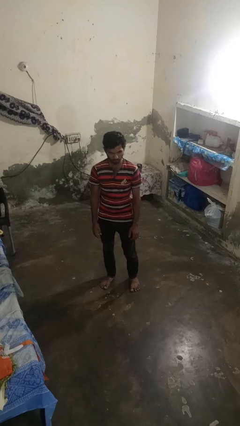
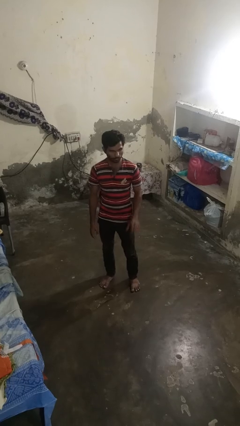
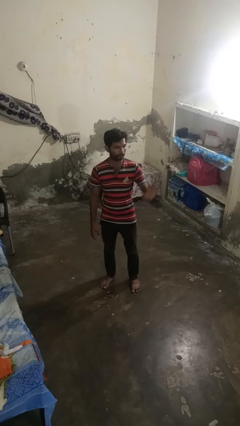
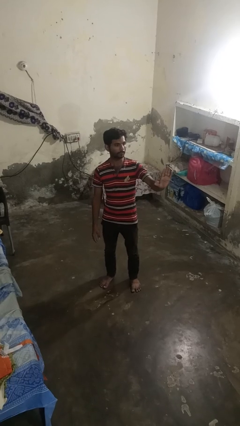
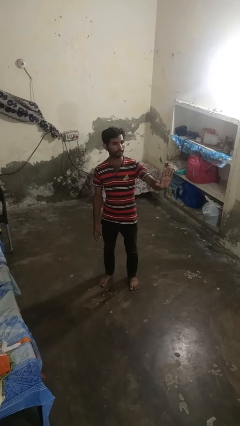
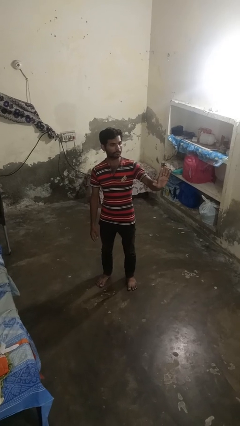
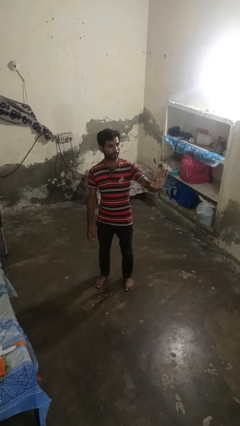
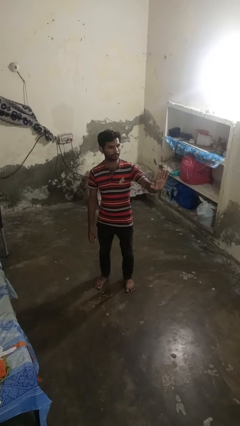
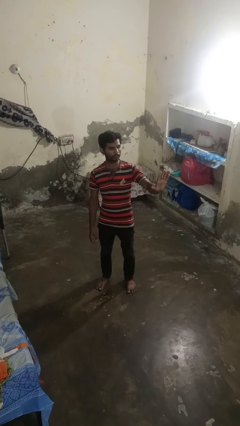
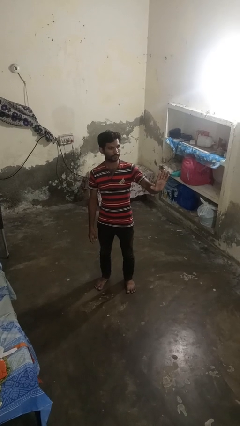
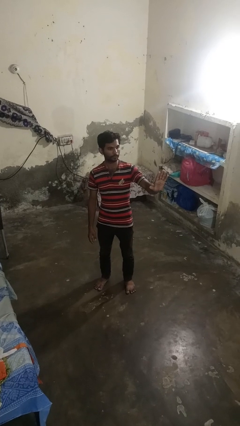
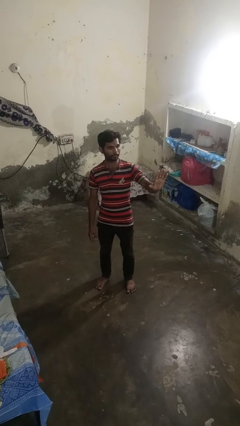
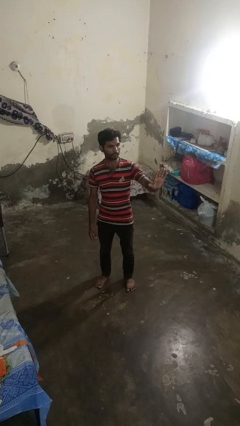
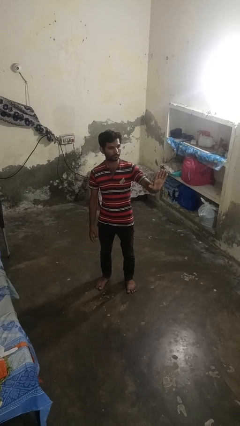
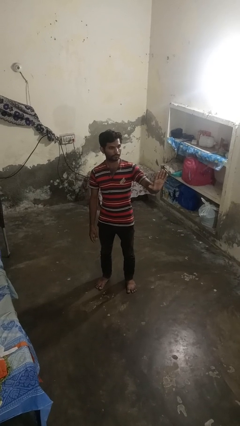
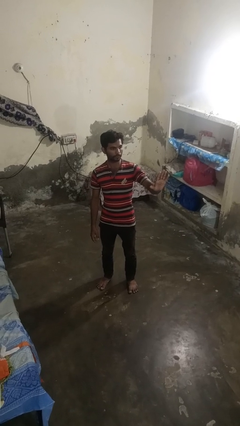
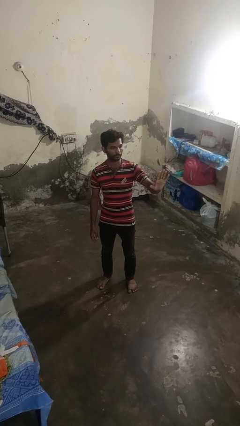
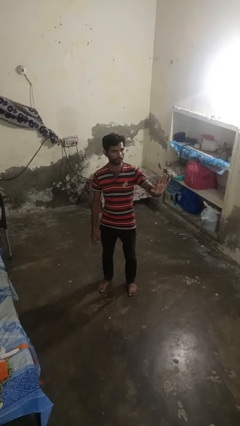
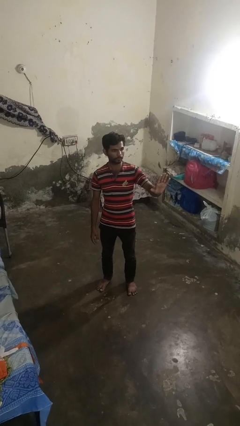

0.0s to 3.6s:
person gestures stop

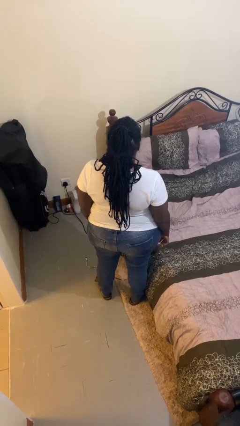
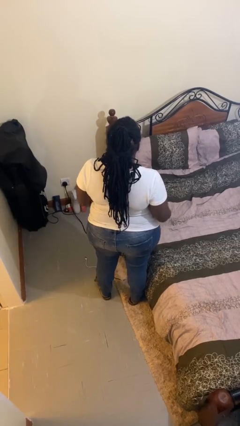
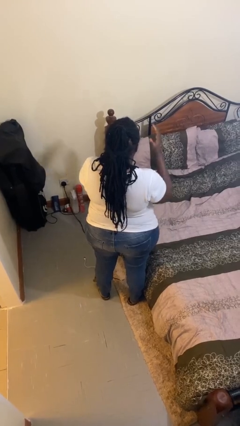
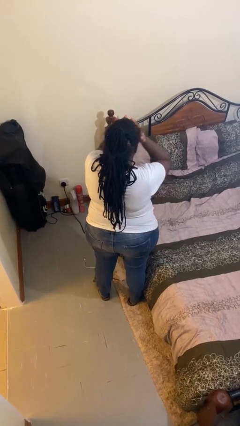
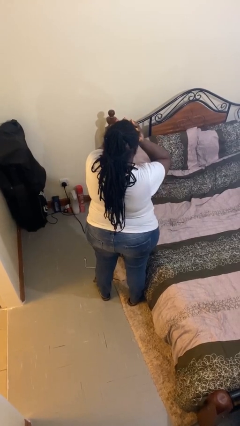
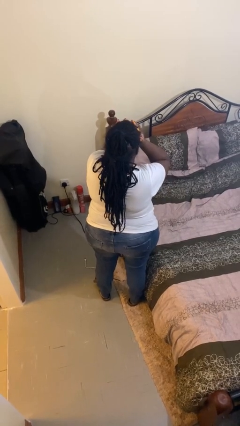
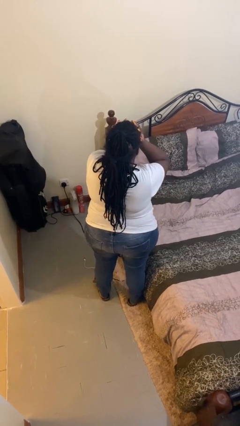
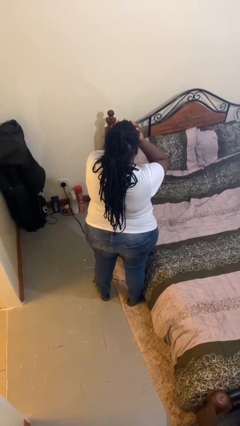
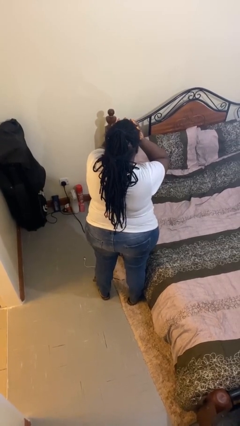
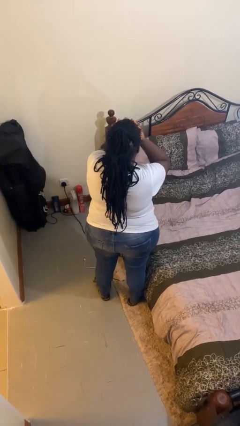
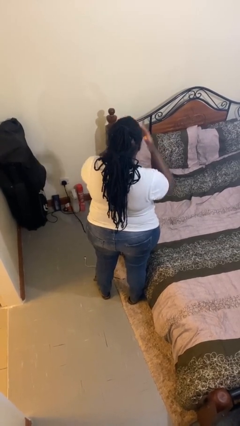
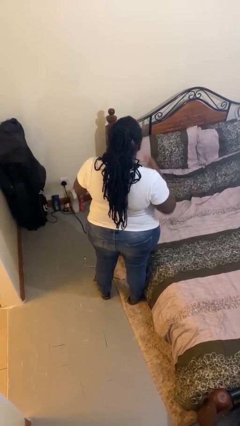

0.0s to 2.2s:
person covers face with hands

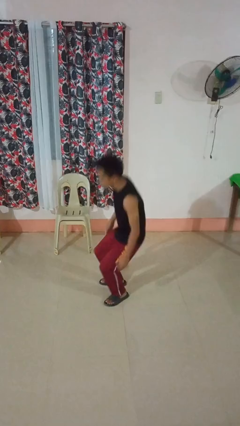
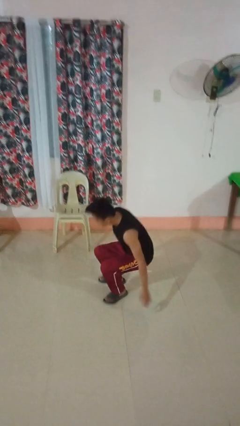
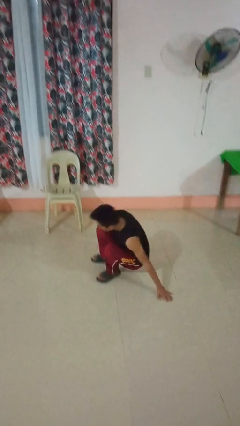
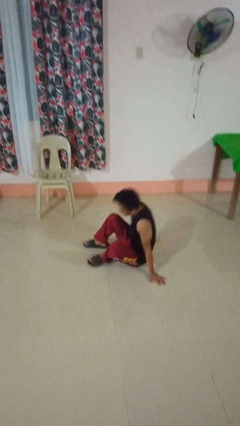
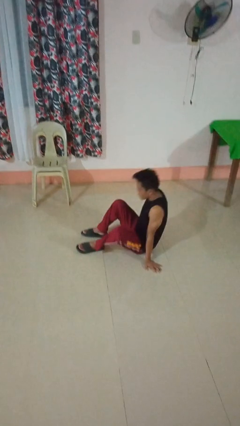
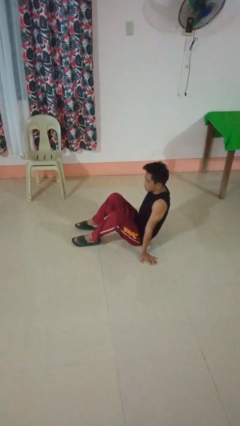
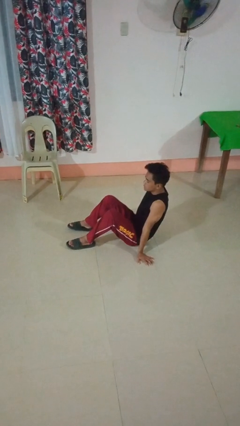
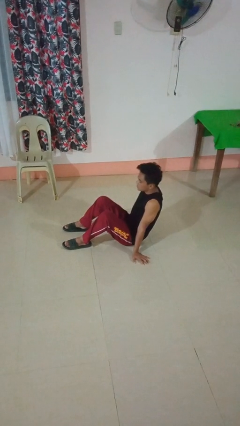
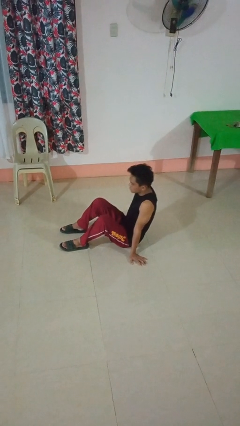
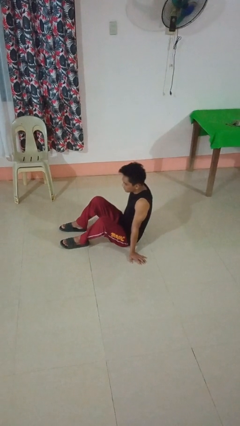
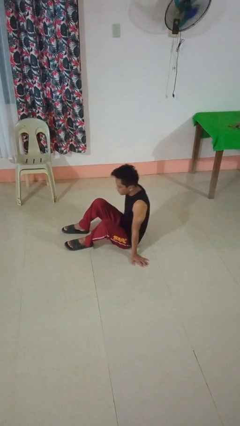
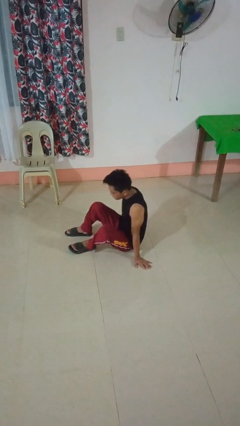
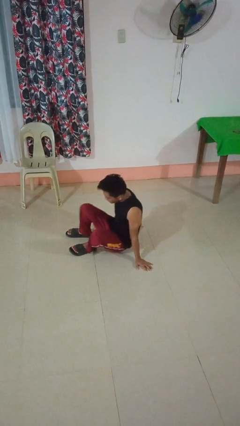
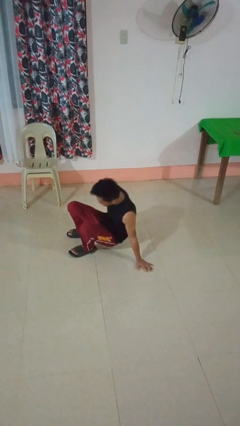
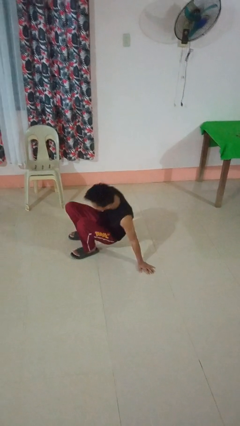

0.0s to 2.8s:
person falls while standing

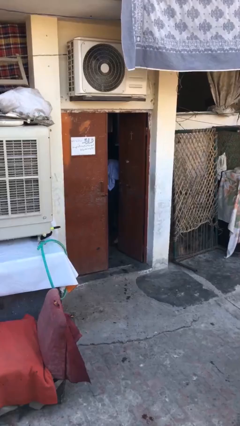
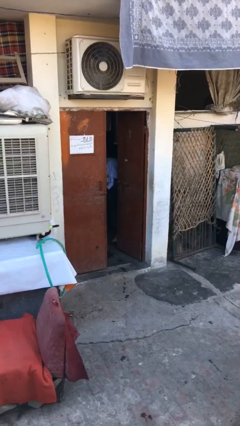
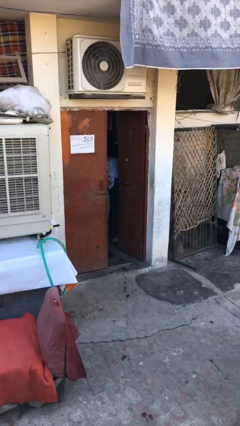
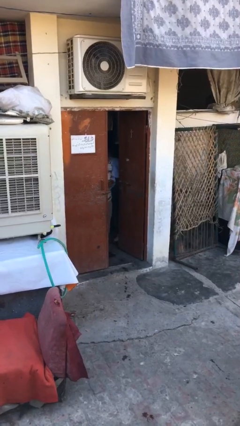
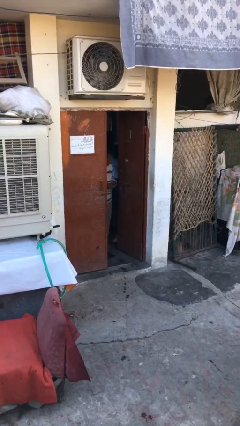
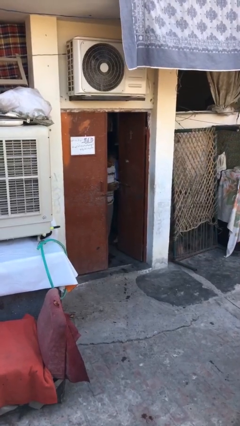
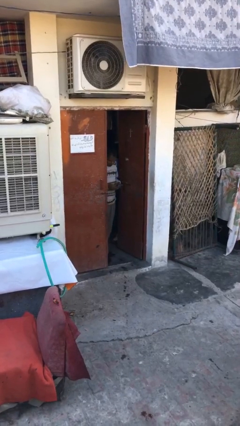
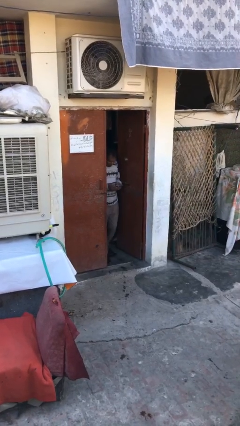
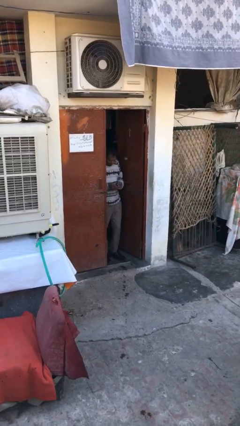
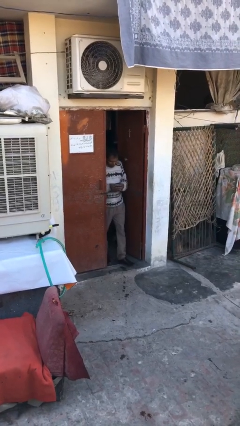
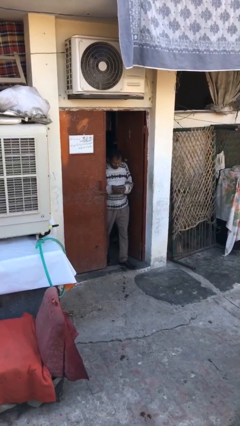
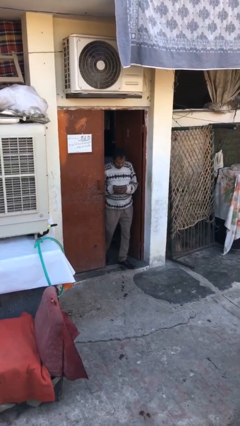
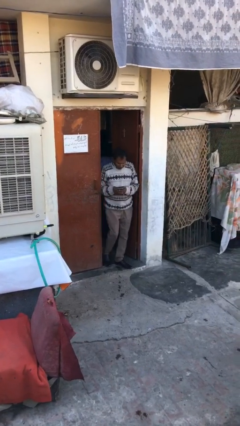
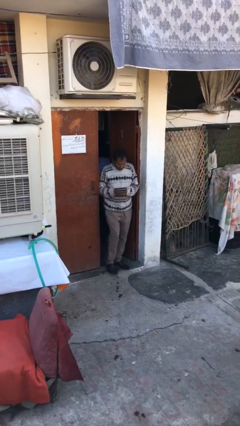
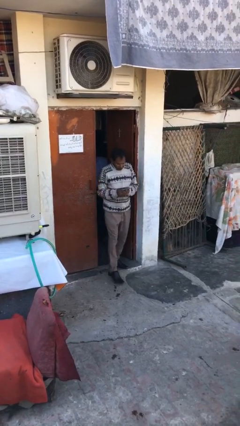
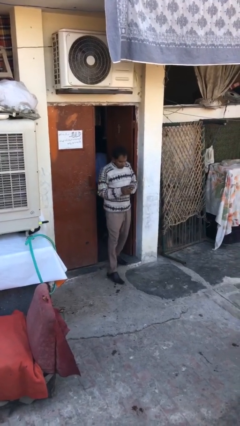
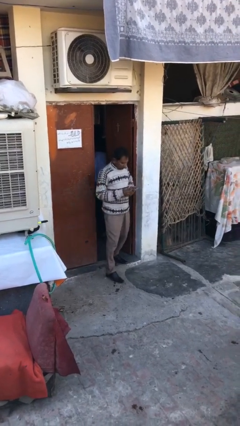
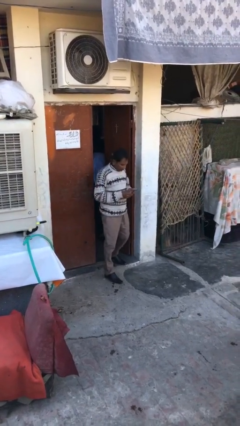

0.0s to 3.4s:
person enters scene through structure

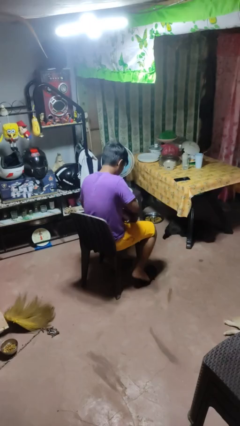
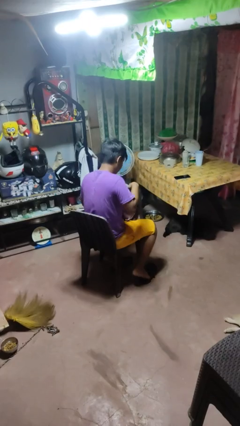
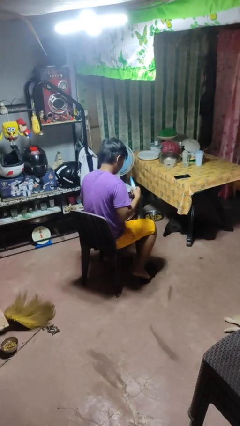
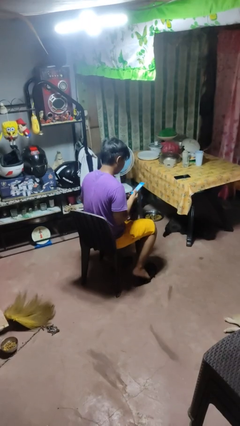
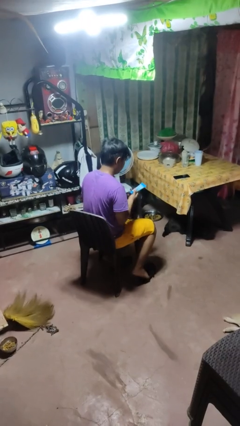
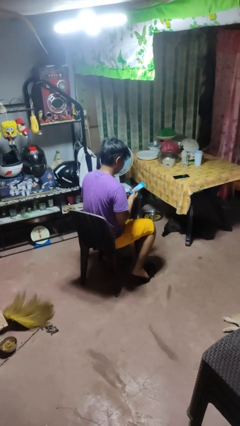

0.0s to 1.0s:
person takes object from purse

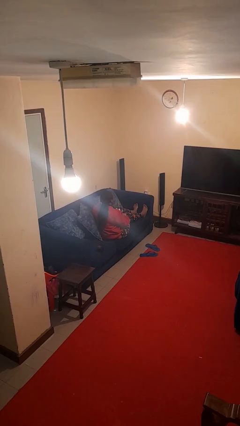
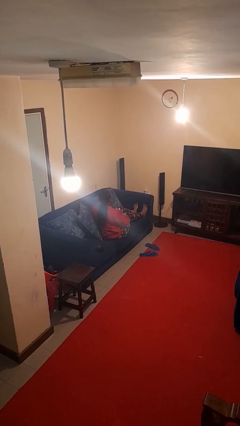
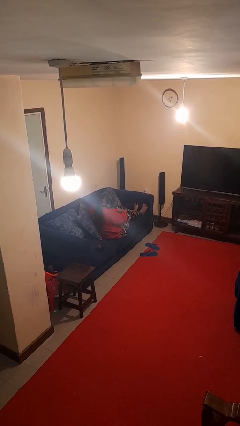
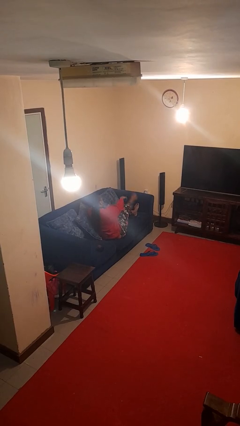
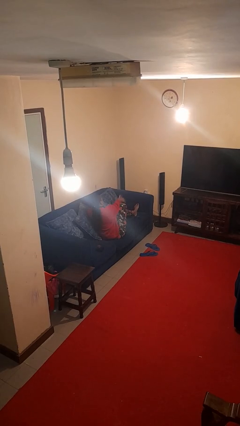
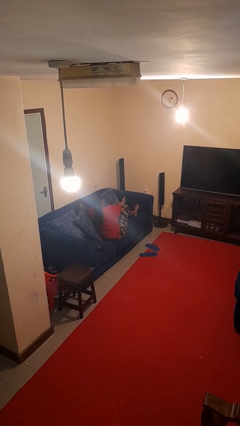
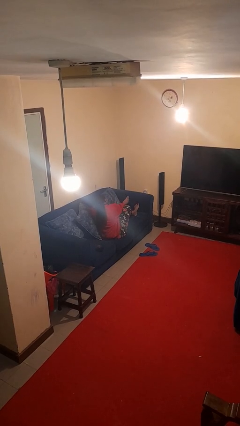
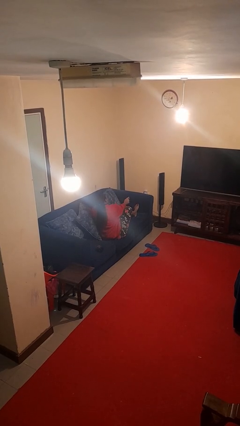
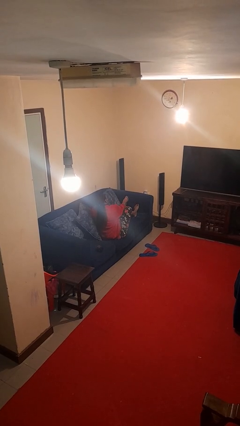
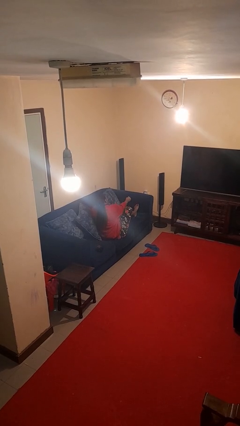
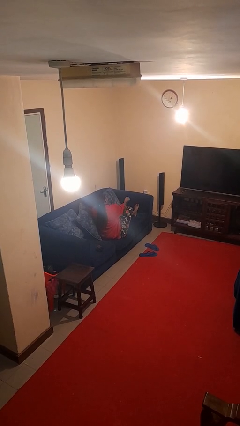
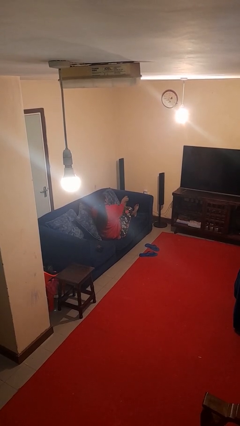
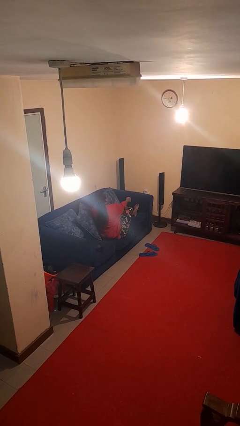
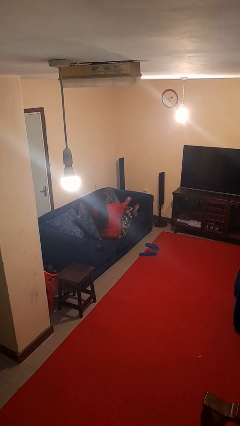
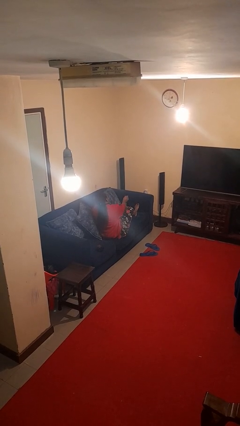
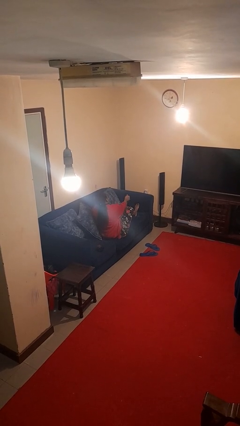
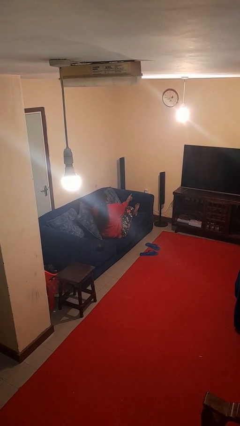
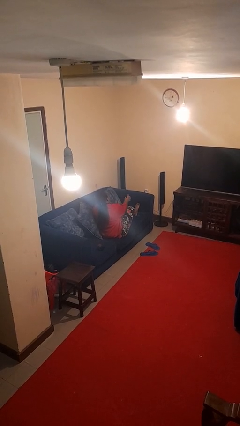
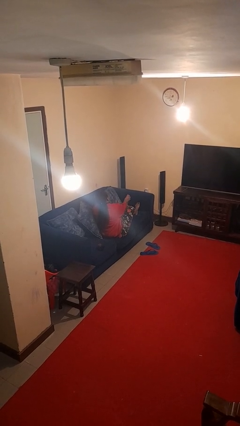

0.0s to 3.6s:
person rubs foot

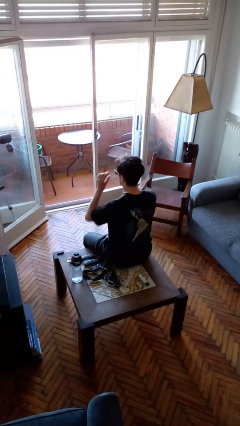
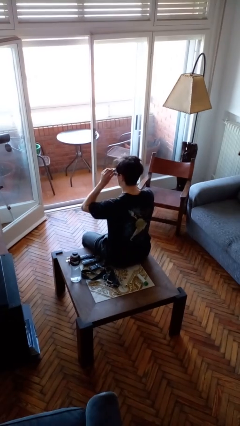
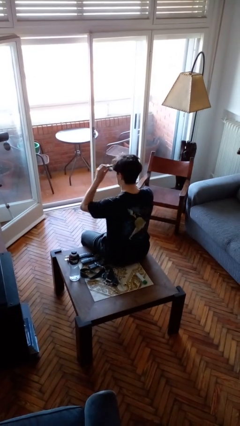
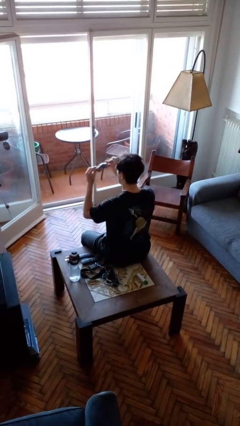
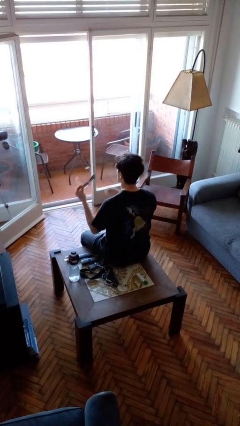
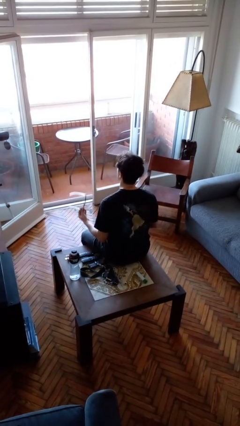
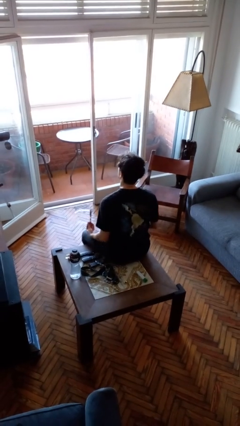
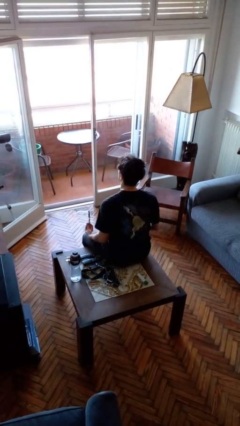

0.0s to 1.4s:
person takes off sunglasses
